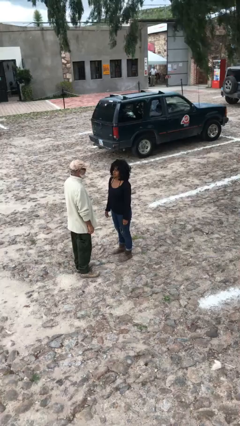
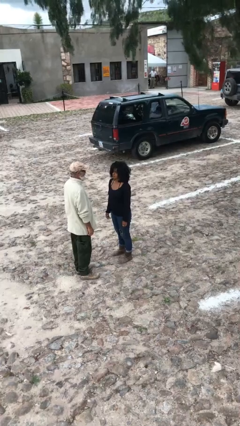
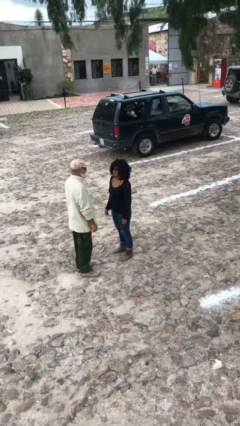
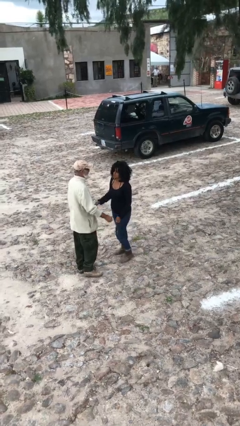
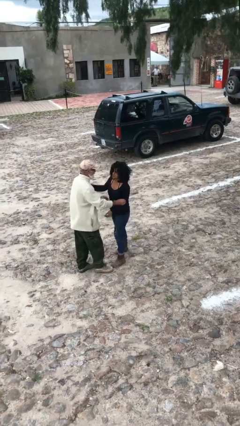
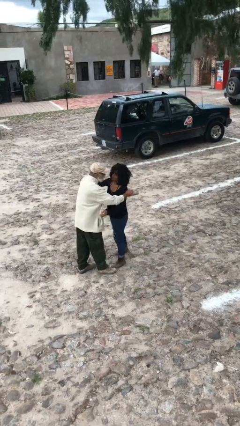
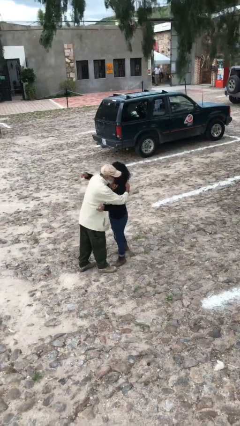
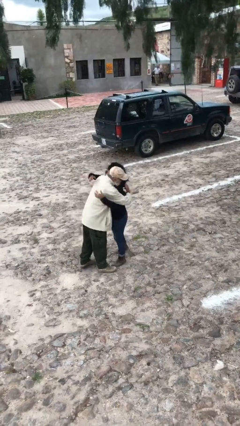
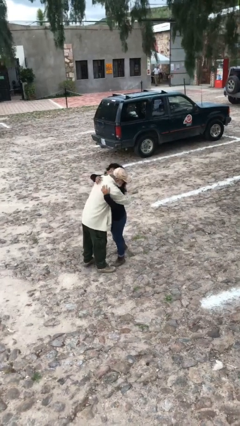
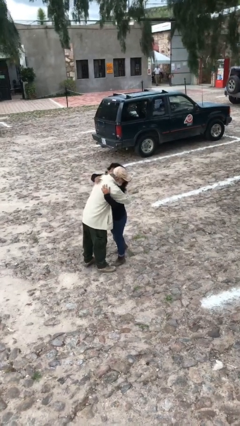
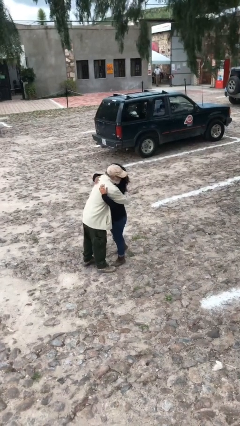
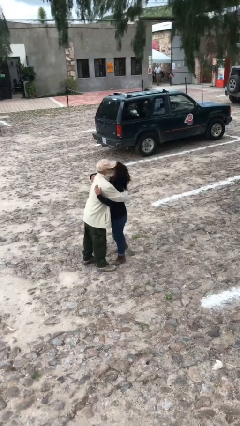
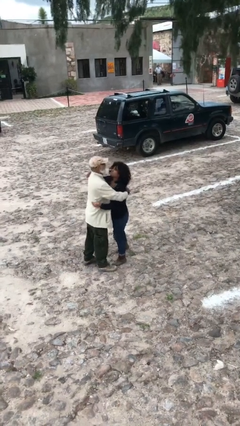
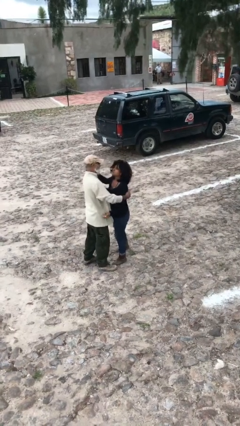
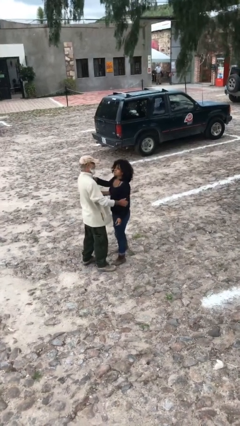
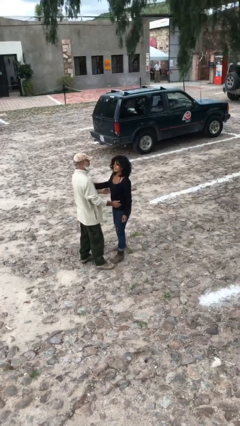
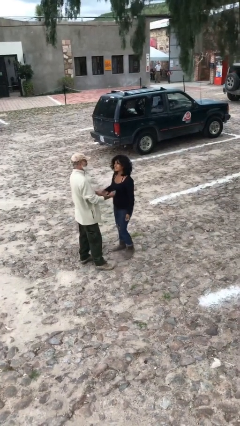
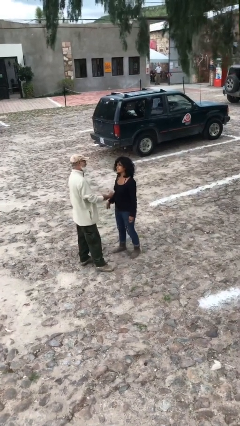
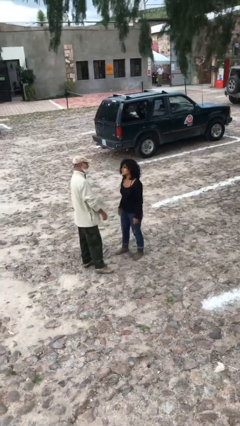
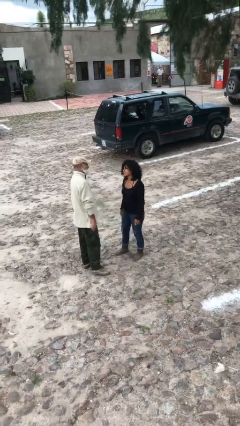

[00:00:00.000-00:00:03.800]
person embraces person

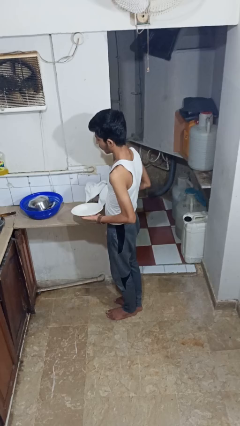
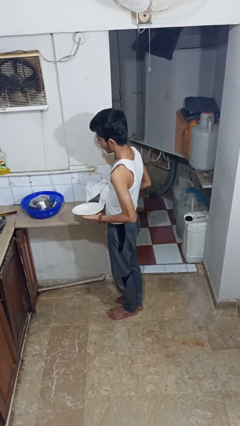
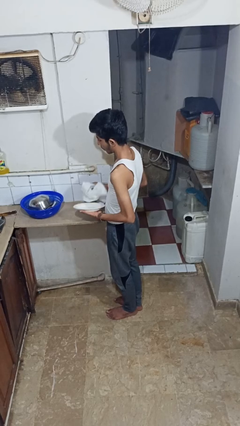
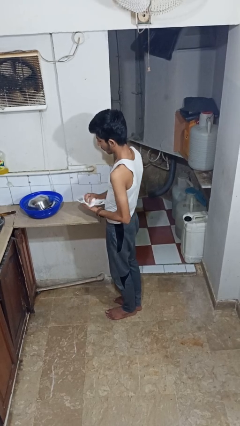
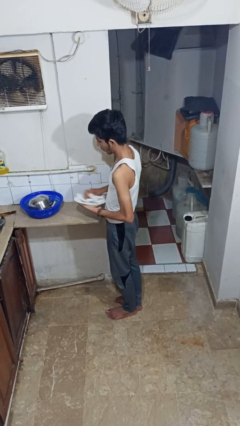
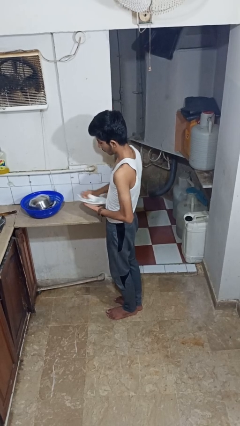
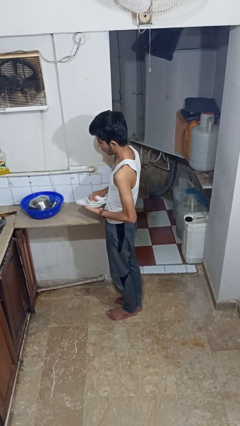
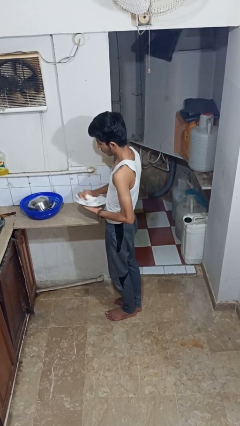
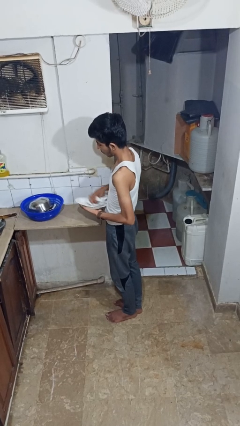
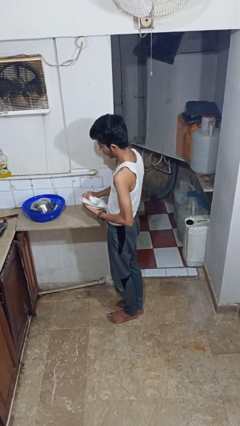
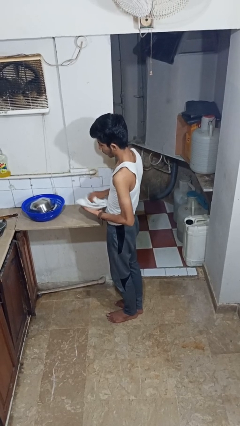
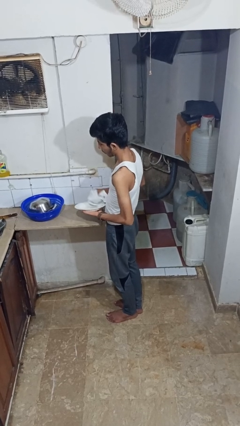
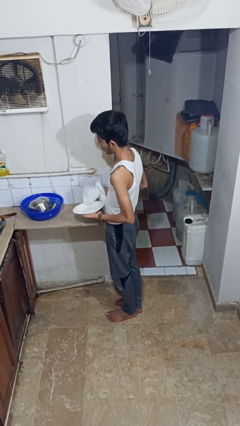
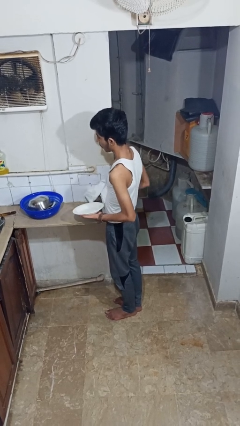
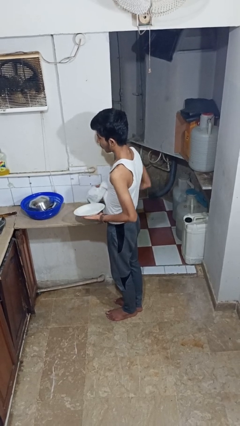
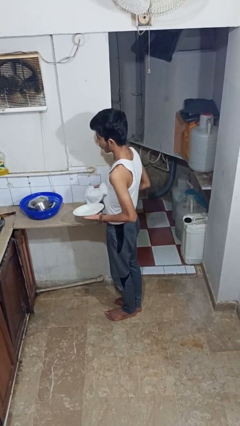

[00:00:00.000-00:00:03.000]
person dries dish

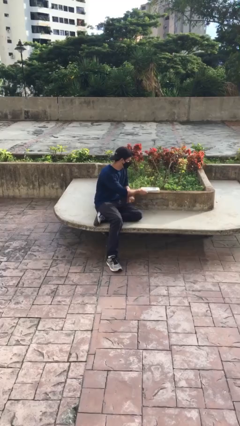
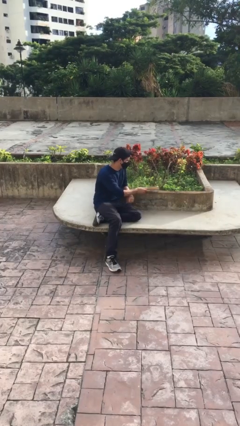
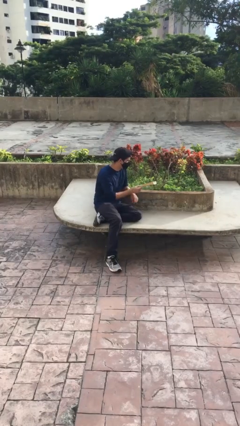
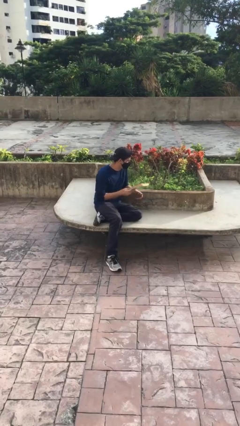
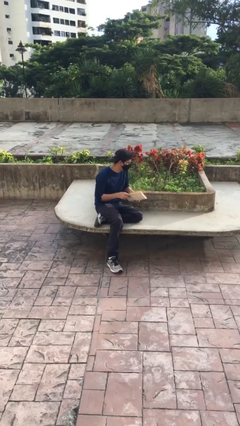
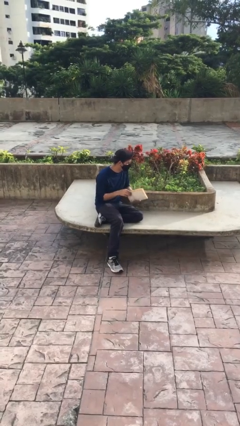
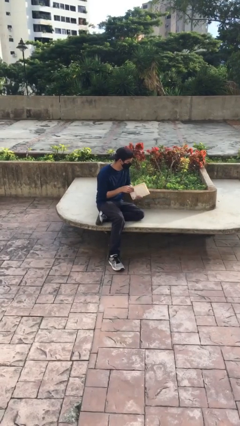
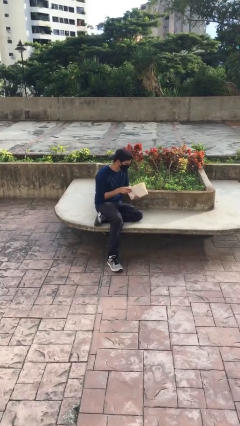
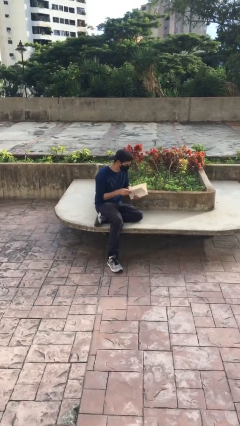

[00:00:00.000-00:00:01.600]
person picks up object from table

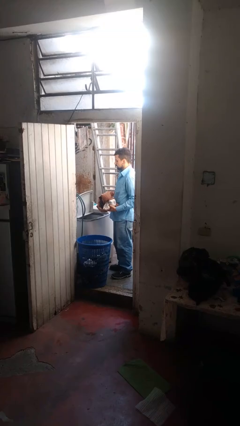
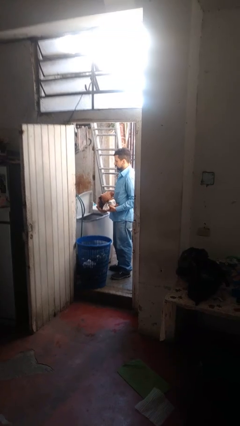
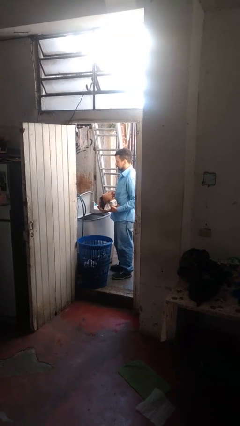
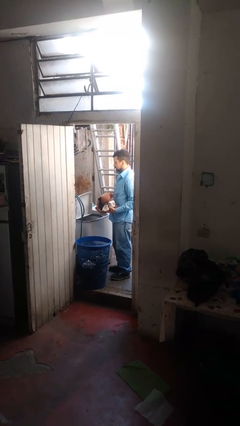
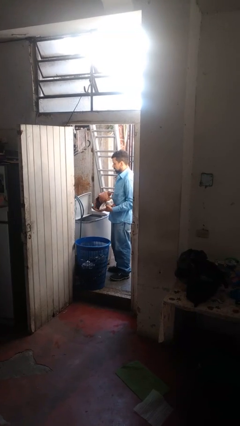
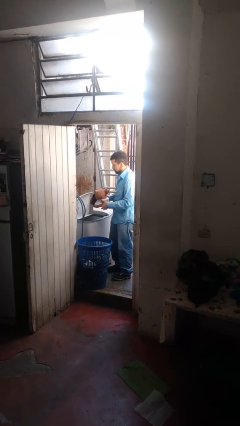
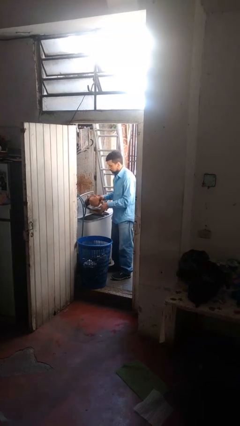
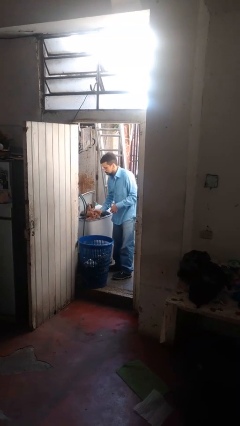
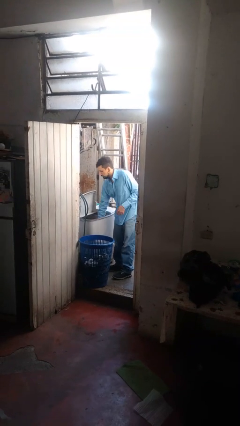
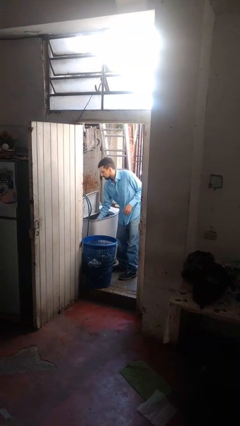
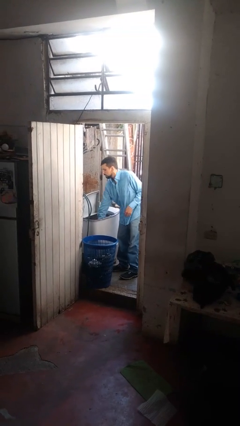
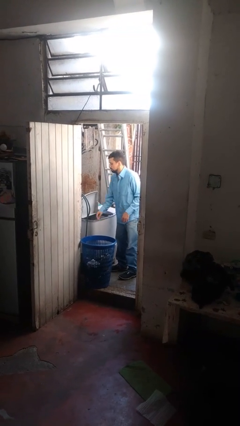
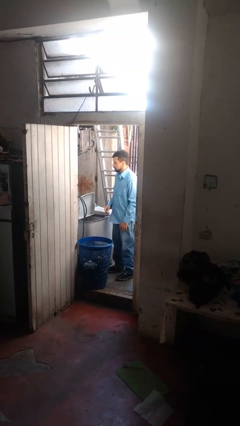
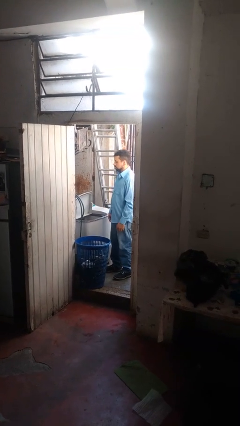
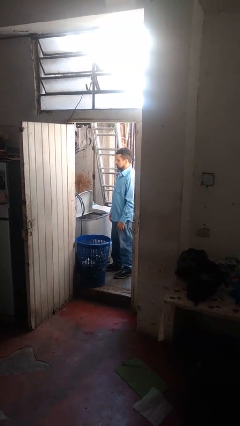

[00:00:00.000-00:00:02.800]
person loads clotheswasher

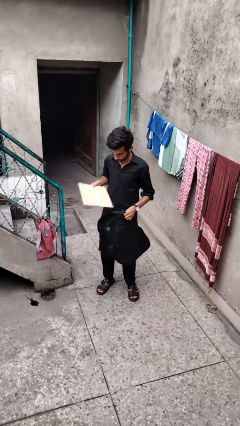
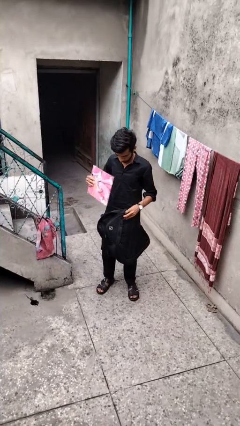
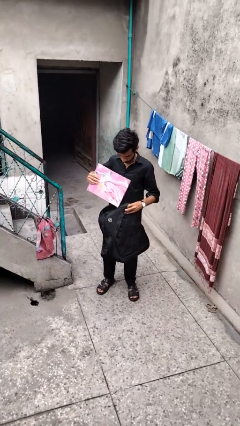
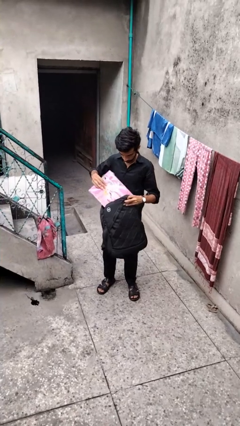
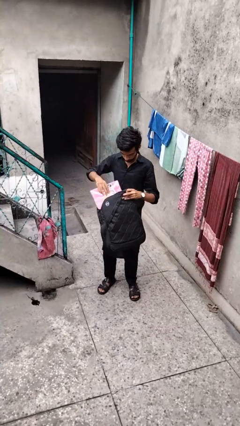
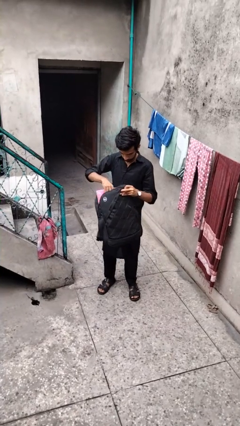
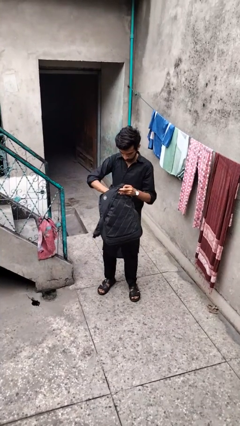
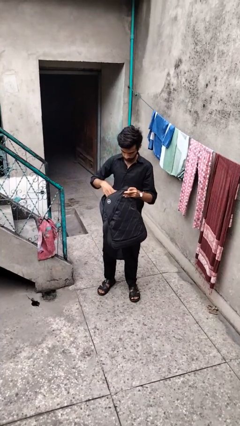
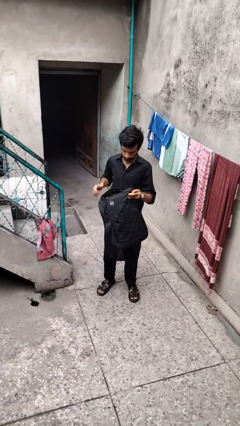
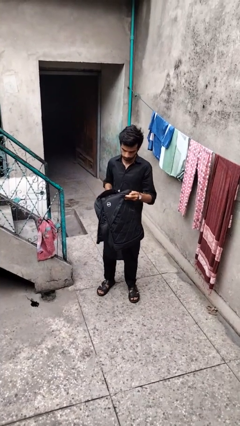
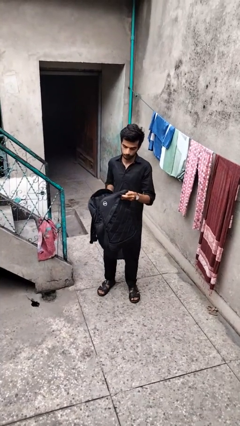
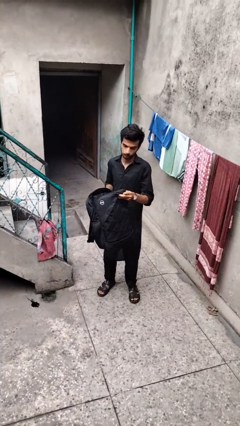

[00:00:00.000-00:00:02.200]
person puts object into backpack

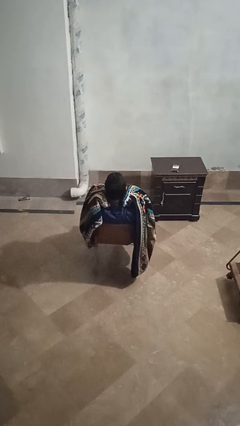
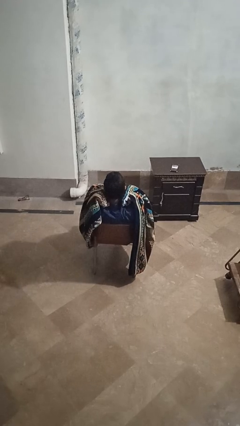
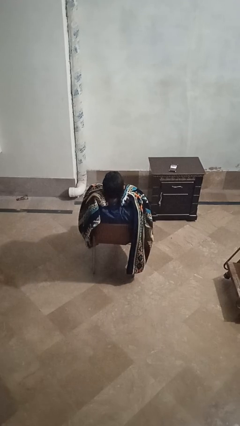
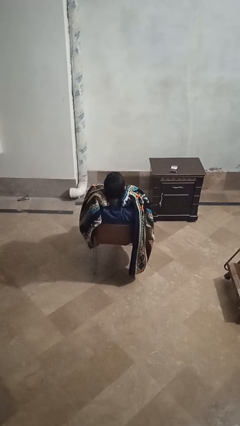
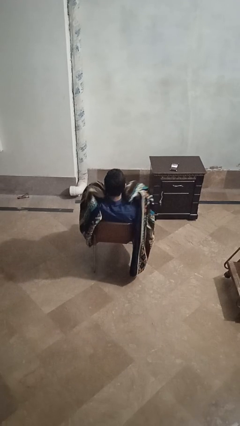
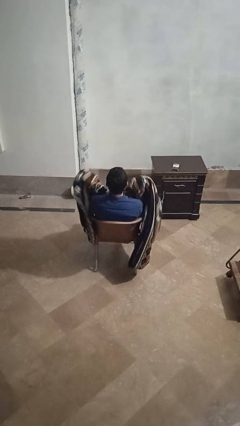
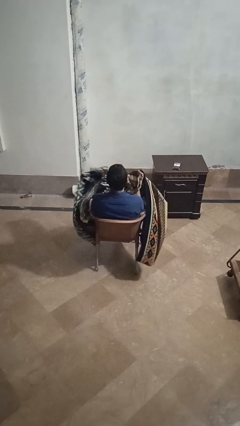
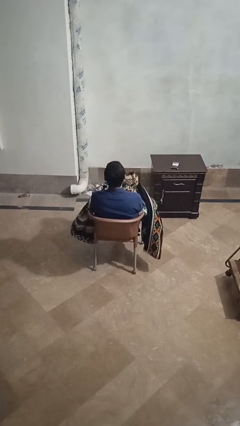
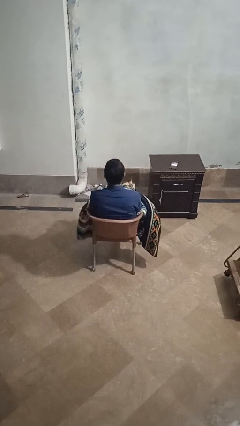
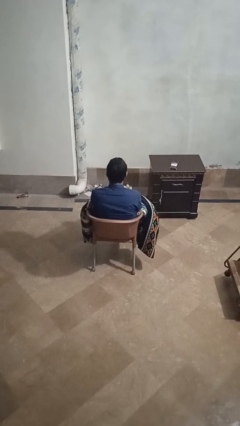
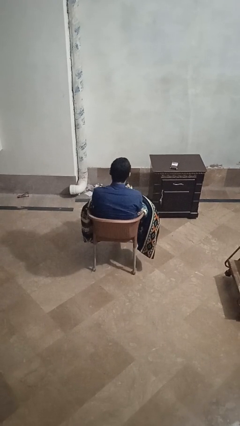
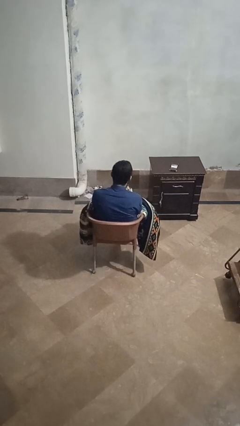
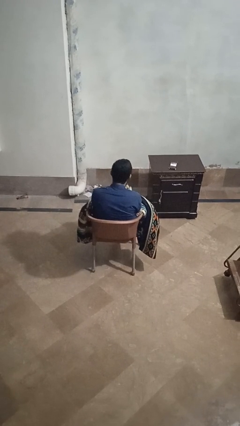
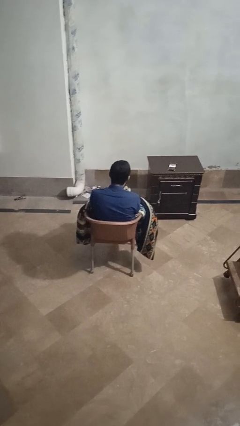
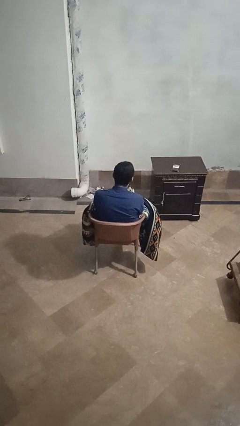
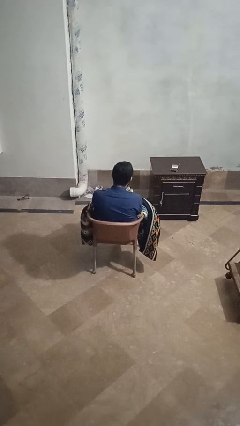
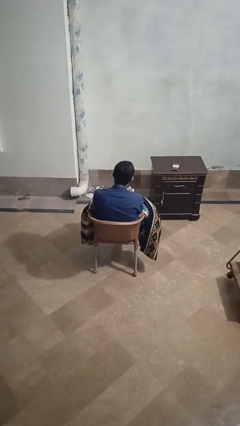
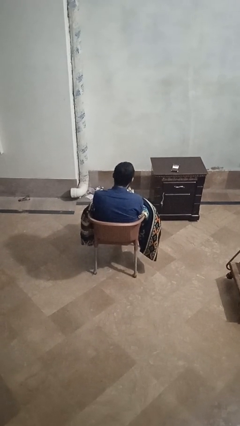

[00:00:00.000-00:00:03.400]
person uncovers with blanket

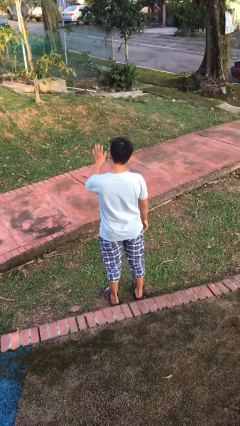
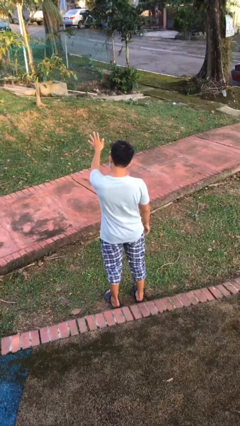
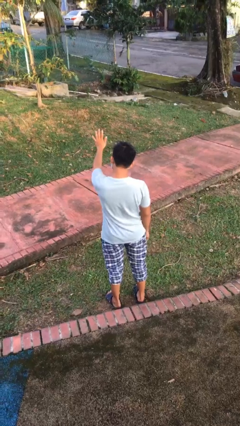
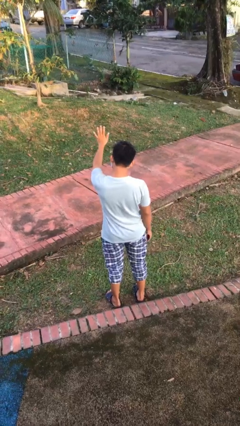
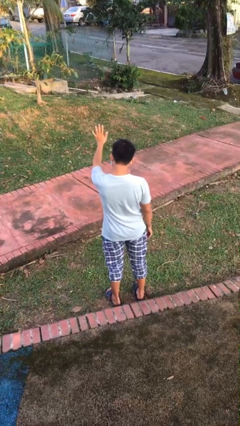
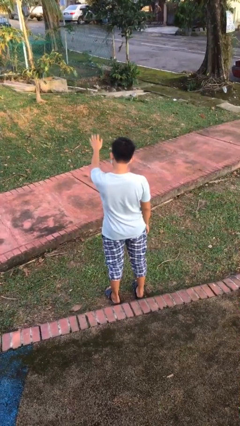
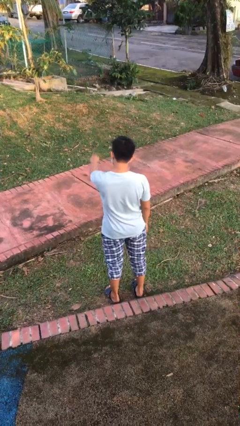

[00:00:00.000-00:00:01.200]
person gestures stop
